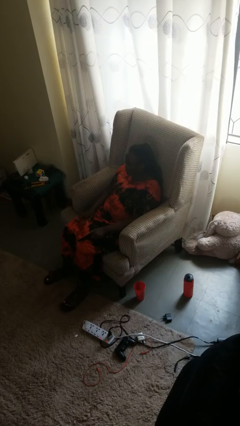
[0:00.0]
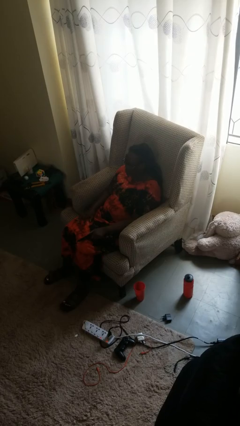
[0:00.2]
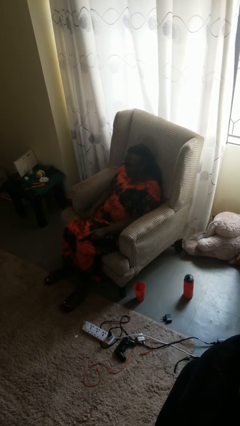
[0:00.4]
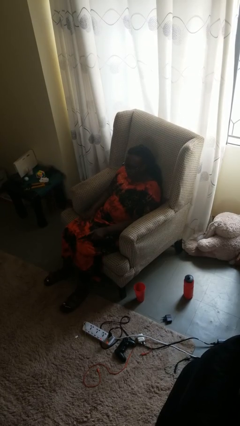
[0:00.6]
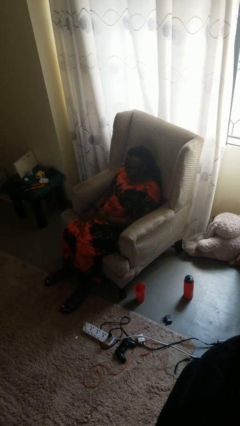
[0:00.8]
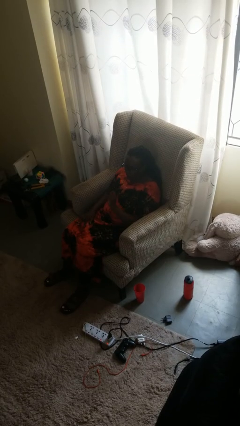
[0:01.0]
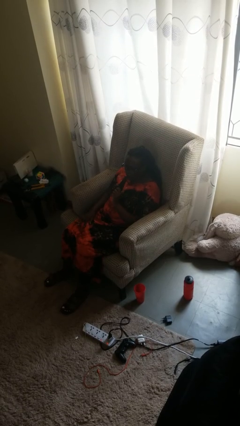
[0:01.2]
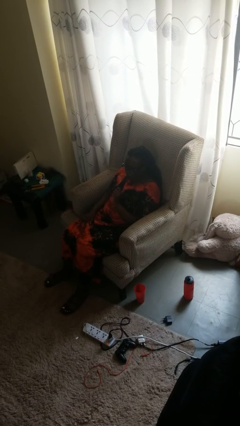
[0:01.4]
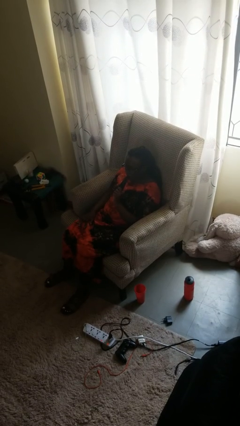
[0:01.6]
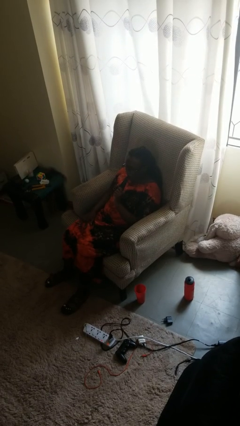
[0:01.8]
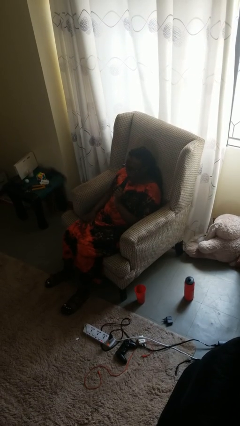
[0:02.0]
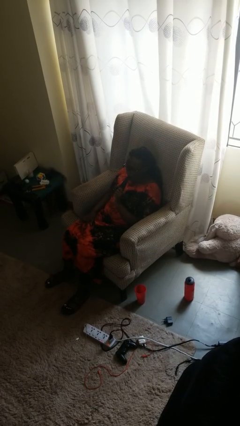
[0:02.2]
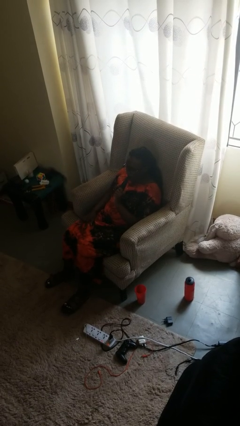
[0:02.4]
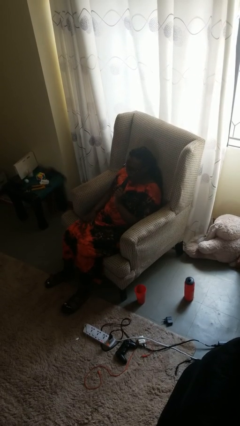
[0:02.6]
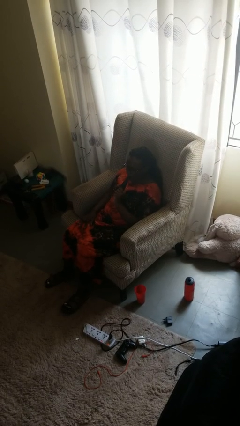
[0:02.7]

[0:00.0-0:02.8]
person vapes

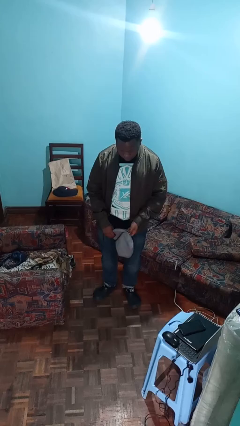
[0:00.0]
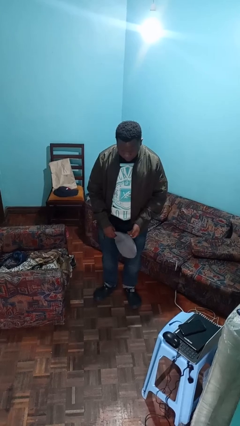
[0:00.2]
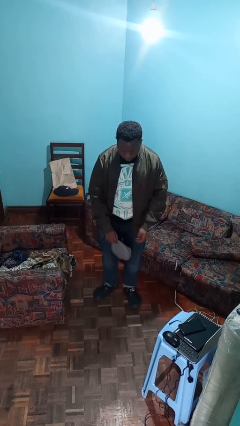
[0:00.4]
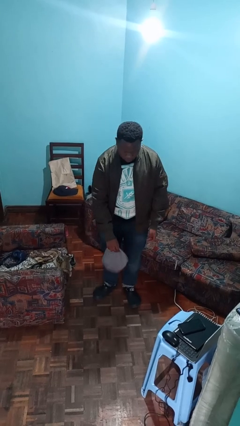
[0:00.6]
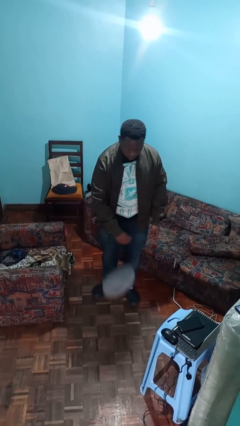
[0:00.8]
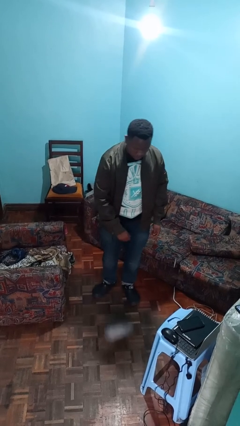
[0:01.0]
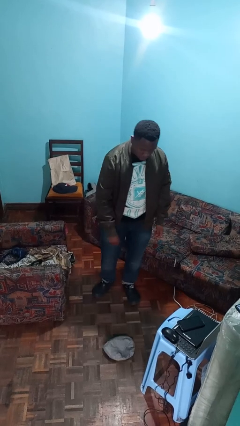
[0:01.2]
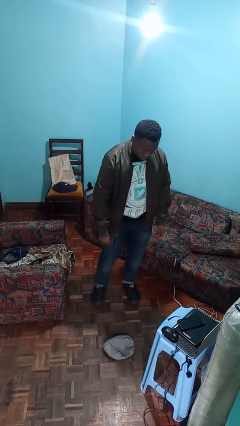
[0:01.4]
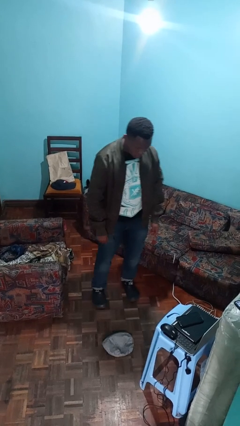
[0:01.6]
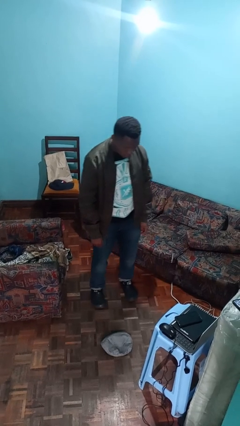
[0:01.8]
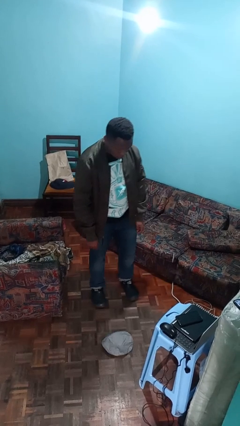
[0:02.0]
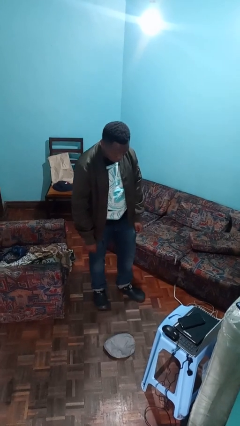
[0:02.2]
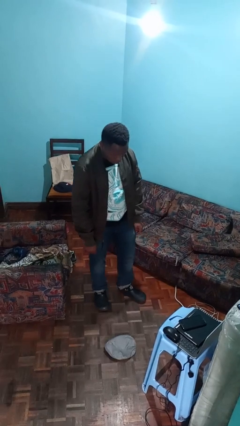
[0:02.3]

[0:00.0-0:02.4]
person drops object

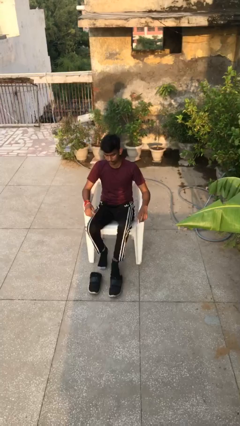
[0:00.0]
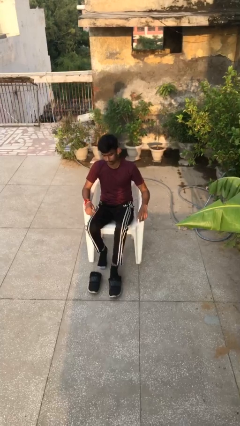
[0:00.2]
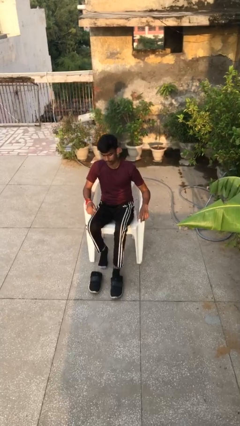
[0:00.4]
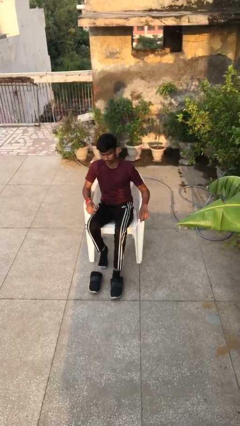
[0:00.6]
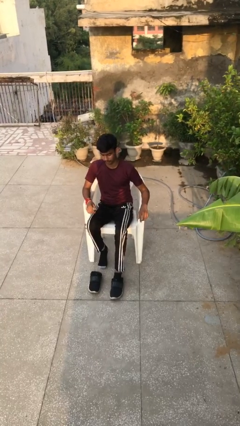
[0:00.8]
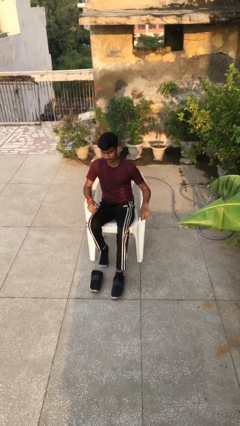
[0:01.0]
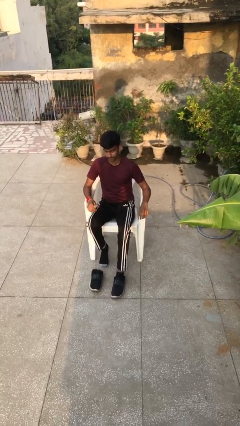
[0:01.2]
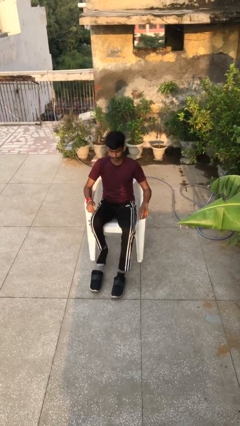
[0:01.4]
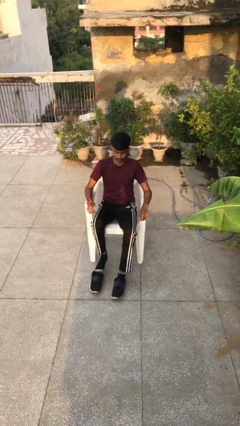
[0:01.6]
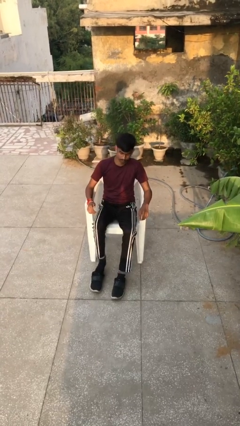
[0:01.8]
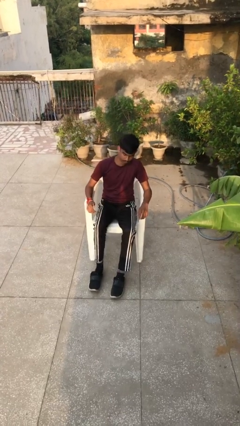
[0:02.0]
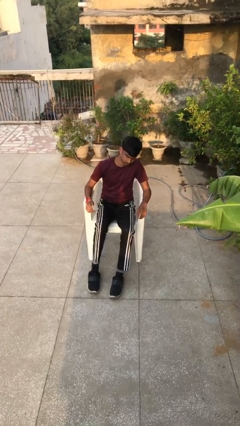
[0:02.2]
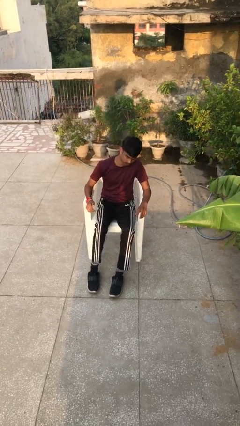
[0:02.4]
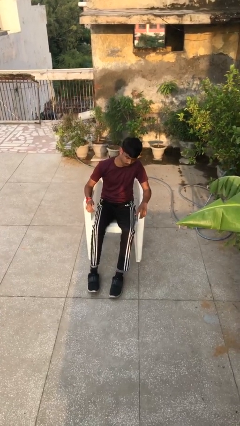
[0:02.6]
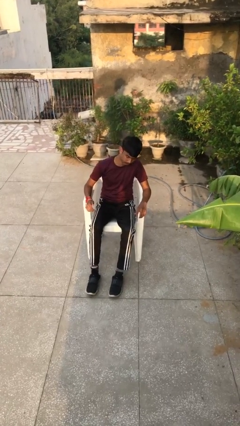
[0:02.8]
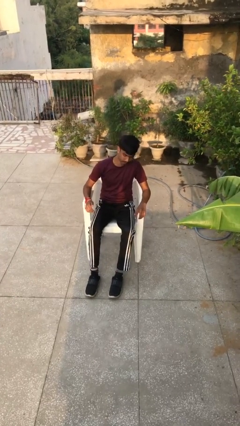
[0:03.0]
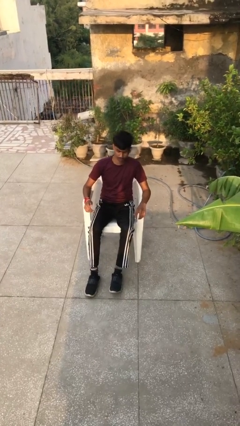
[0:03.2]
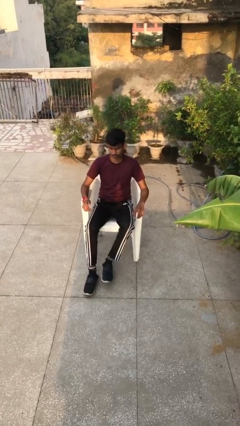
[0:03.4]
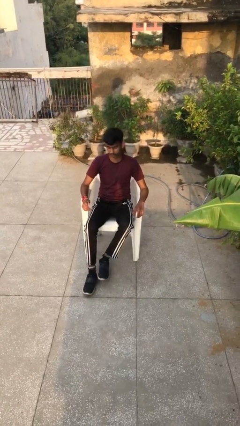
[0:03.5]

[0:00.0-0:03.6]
person puts on shoes

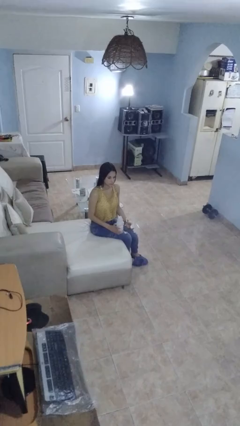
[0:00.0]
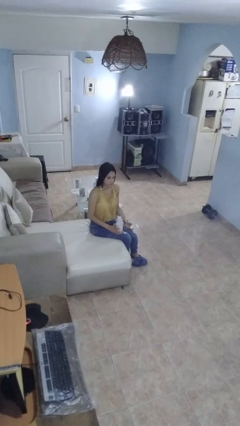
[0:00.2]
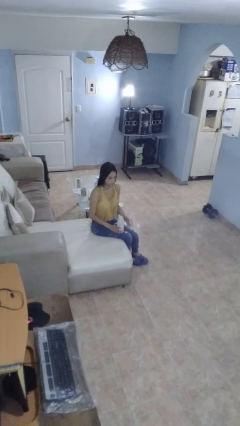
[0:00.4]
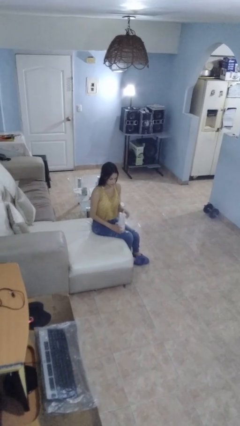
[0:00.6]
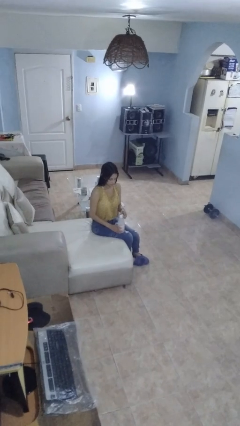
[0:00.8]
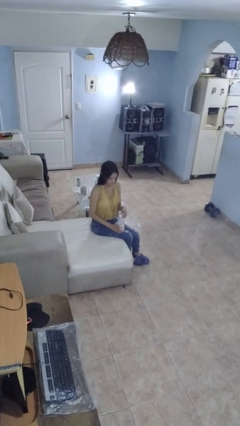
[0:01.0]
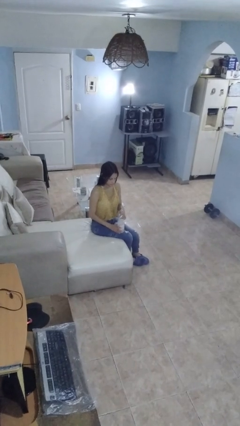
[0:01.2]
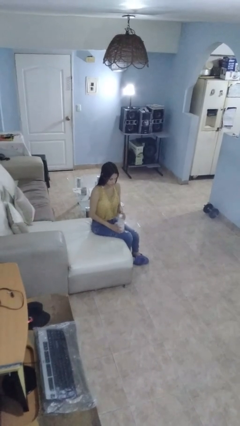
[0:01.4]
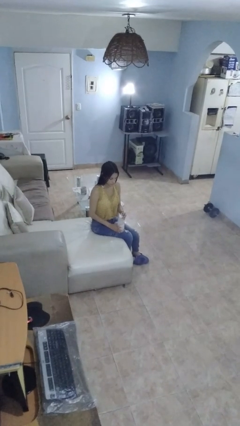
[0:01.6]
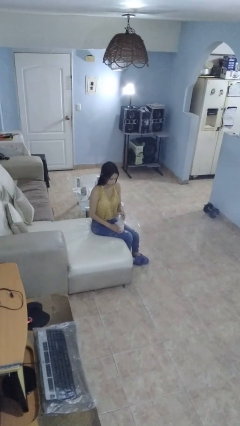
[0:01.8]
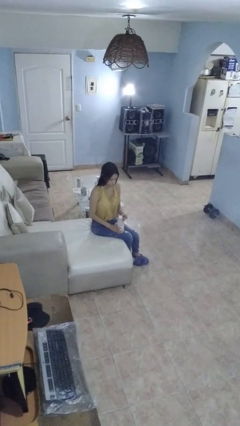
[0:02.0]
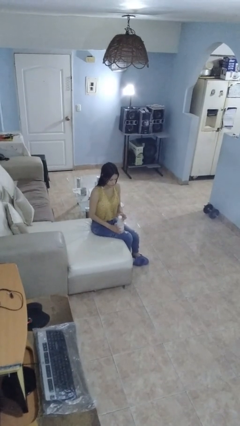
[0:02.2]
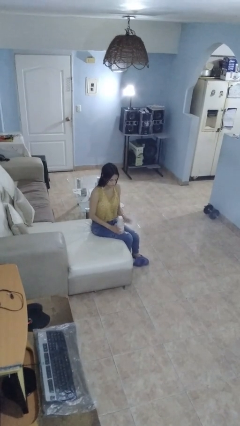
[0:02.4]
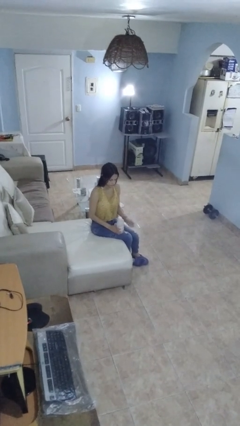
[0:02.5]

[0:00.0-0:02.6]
person screws lid to bottle

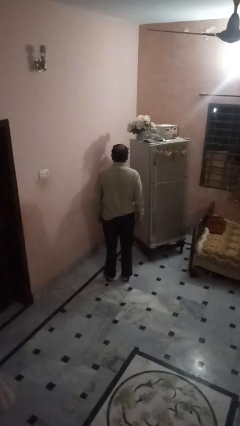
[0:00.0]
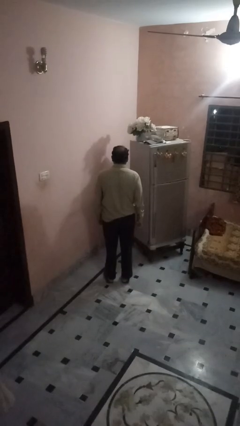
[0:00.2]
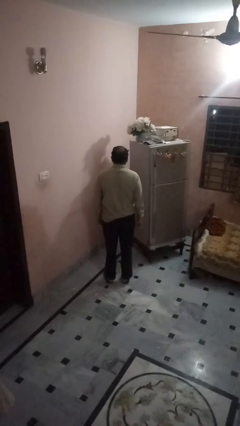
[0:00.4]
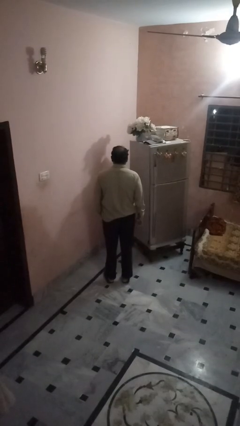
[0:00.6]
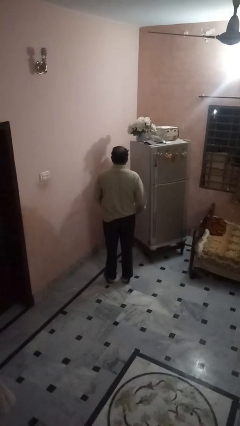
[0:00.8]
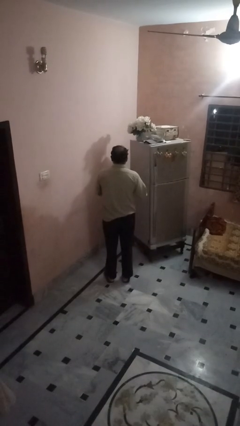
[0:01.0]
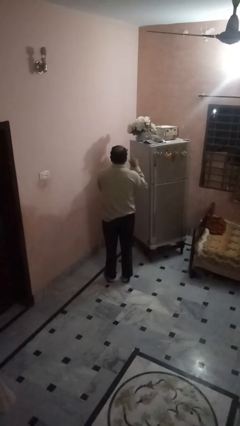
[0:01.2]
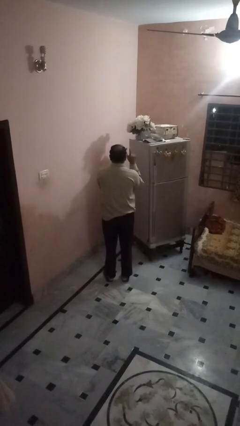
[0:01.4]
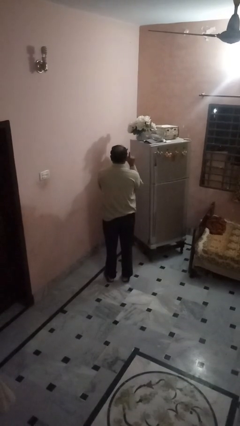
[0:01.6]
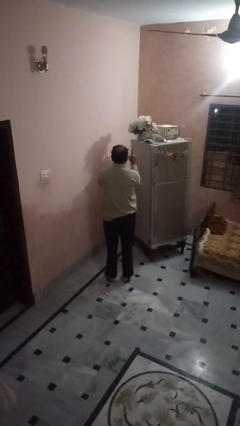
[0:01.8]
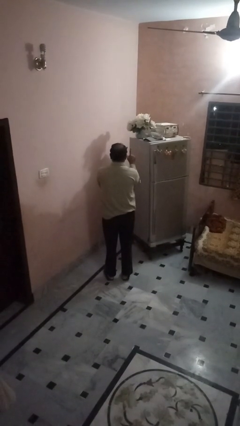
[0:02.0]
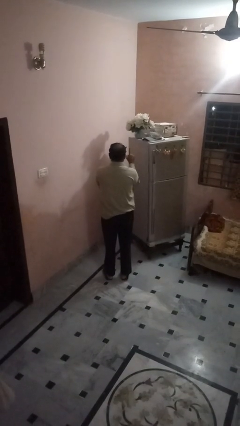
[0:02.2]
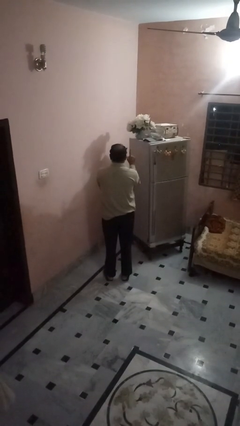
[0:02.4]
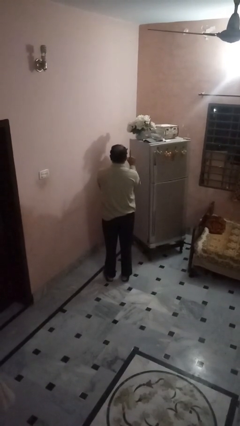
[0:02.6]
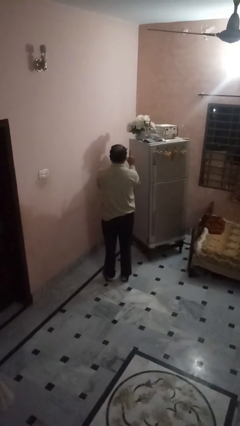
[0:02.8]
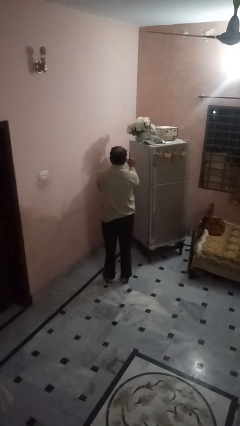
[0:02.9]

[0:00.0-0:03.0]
person gestures number one

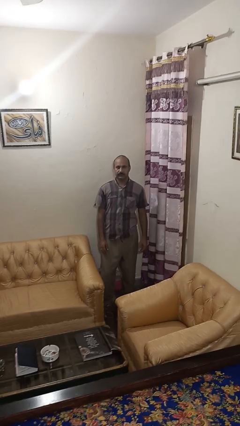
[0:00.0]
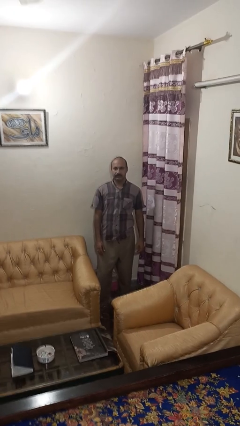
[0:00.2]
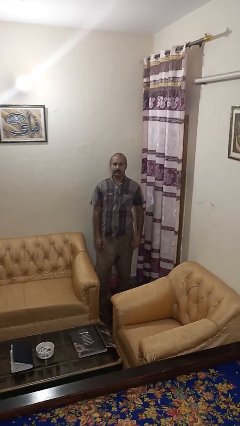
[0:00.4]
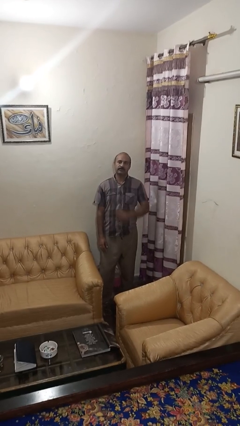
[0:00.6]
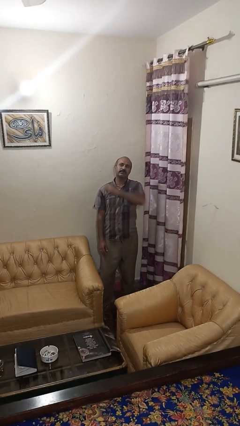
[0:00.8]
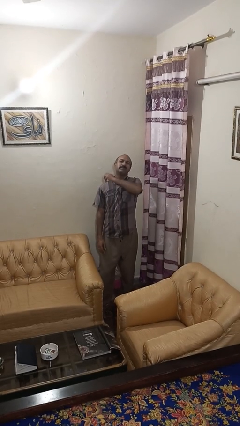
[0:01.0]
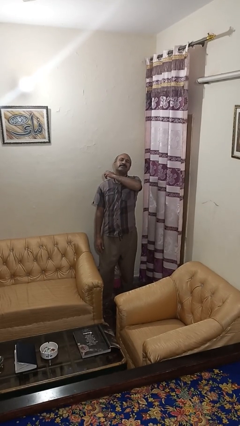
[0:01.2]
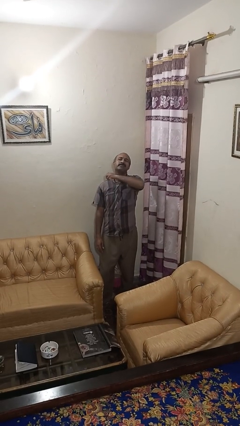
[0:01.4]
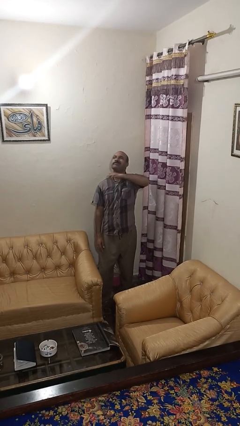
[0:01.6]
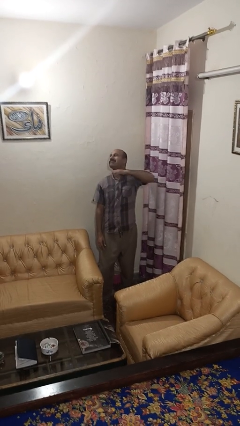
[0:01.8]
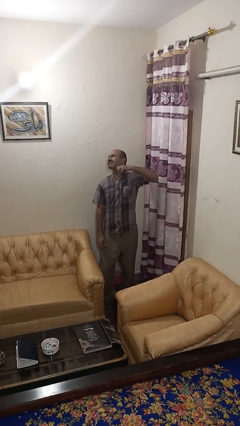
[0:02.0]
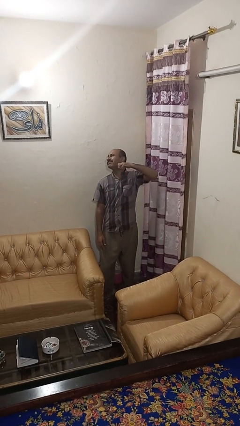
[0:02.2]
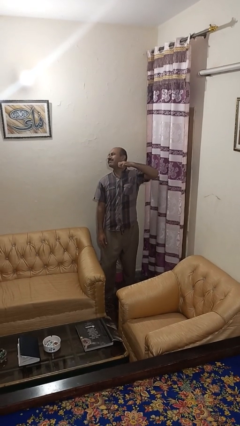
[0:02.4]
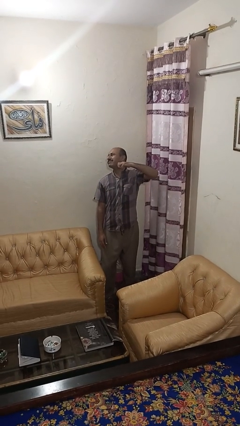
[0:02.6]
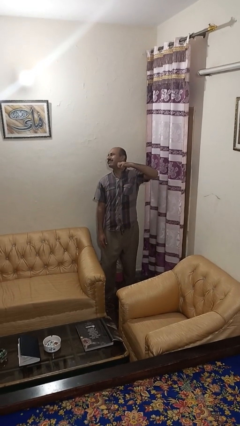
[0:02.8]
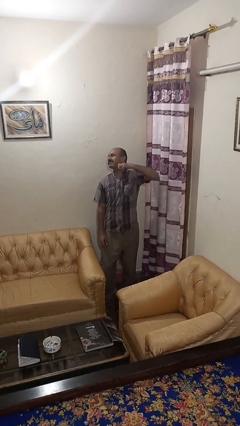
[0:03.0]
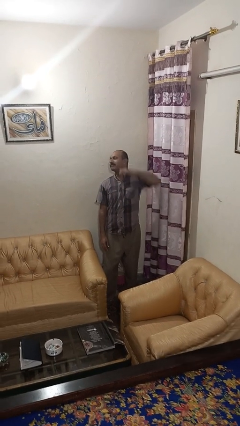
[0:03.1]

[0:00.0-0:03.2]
person gestures cut
